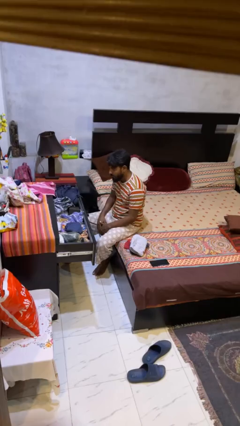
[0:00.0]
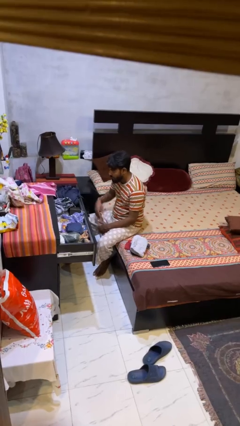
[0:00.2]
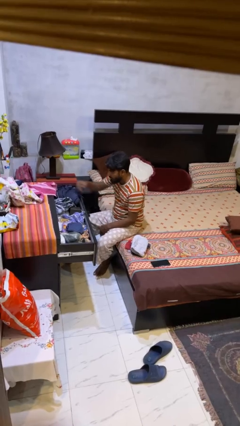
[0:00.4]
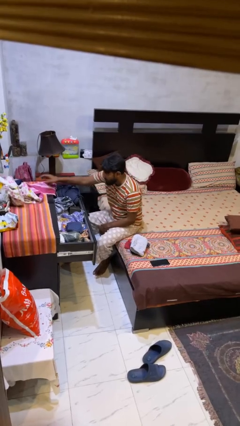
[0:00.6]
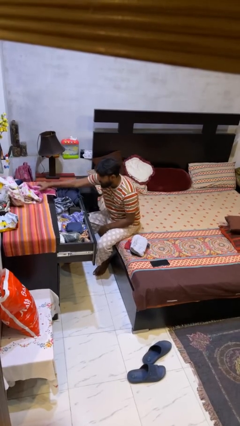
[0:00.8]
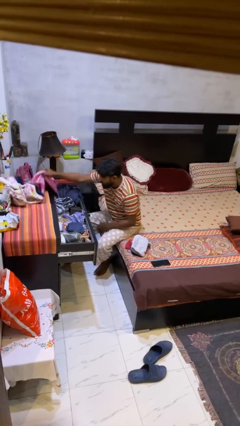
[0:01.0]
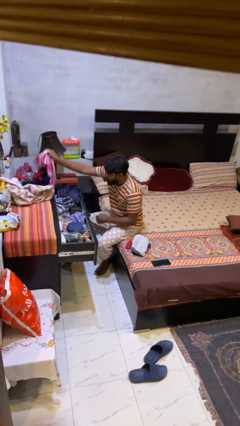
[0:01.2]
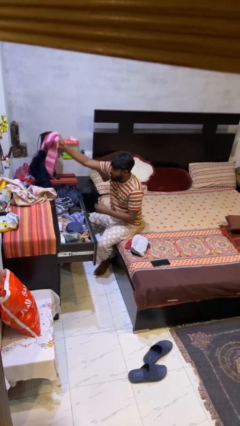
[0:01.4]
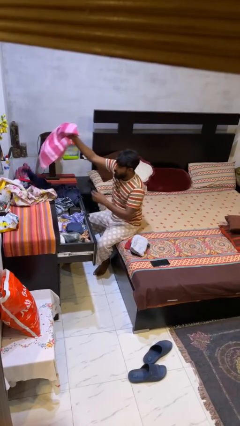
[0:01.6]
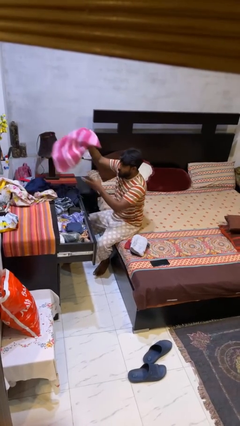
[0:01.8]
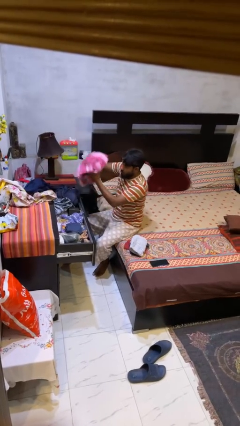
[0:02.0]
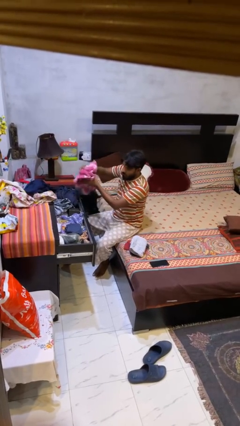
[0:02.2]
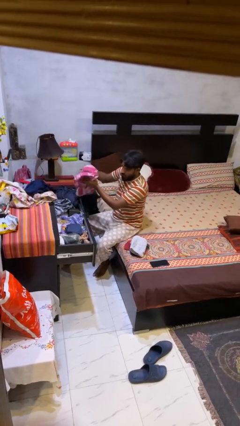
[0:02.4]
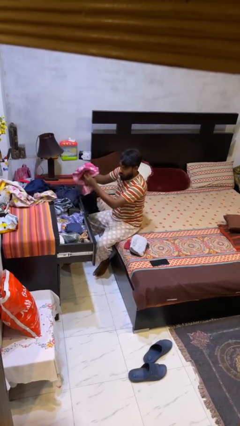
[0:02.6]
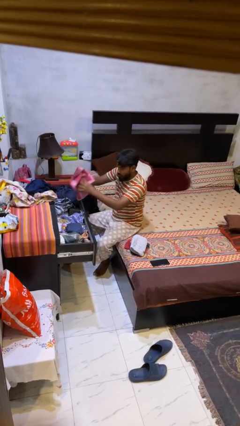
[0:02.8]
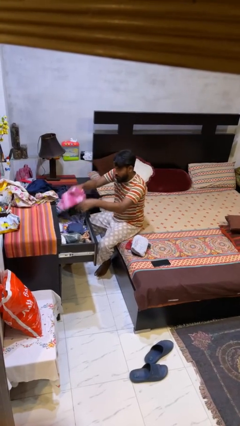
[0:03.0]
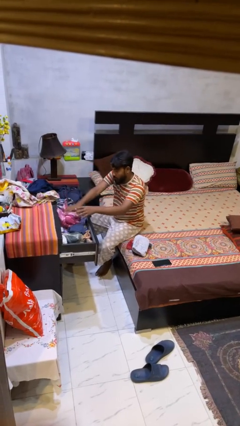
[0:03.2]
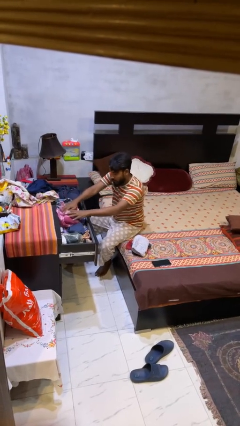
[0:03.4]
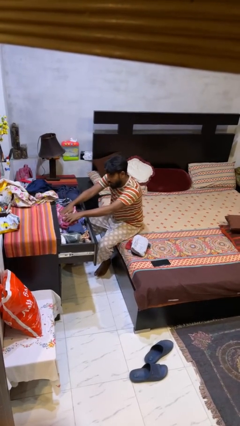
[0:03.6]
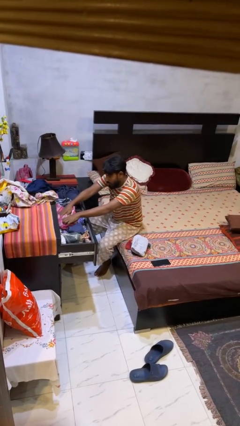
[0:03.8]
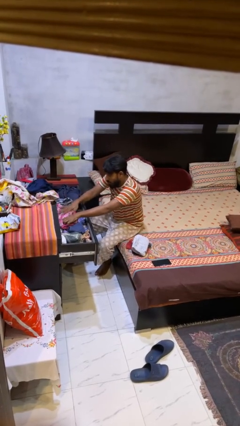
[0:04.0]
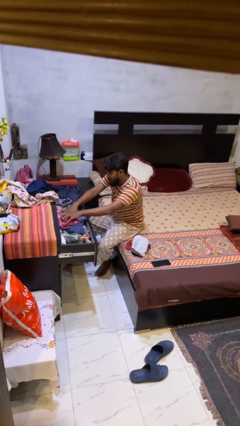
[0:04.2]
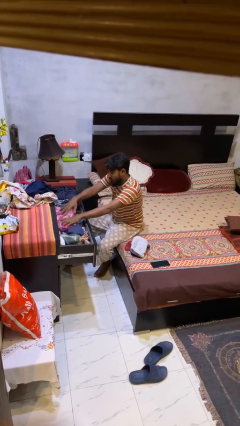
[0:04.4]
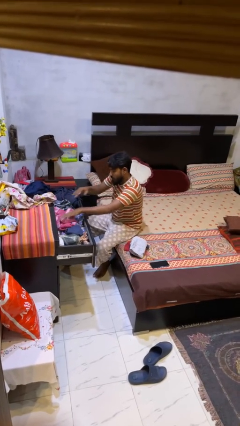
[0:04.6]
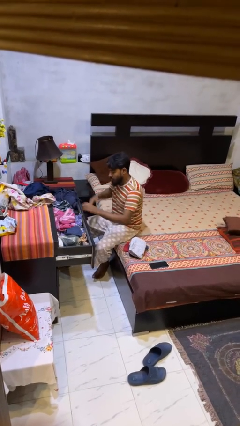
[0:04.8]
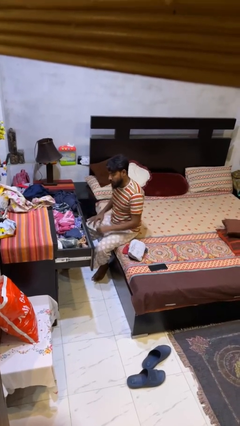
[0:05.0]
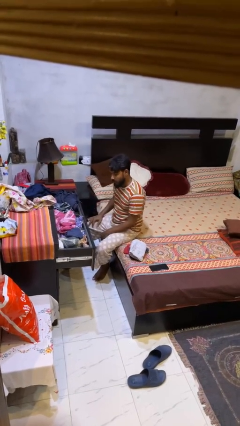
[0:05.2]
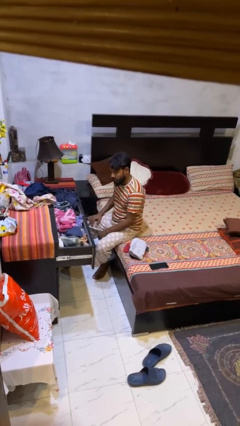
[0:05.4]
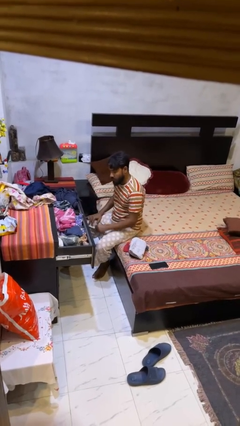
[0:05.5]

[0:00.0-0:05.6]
person puts clothes into dresser

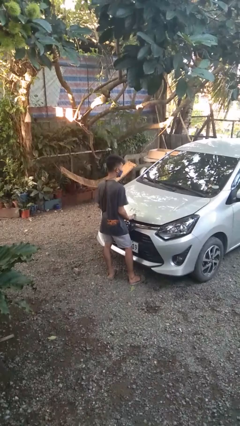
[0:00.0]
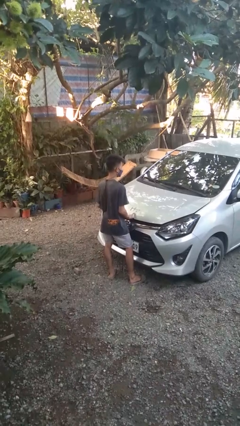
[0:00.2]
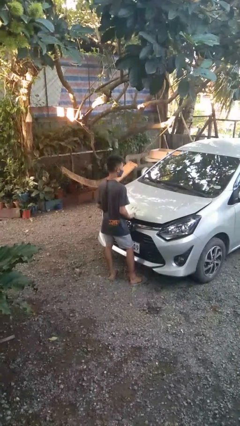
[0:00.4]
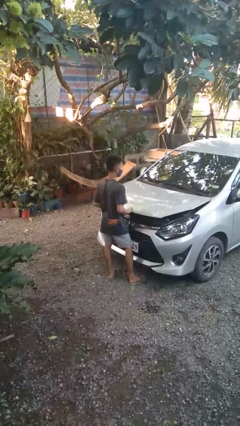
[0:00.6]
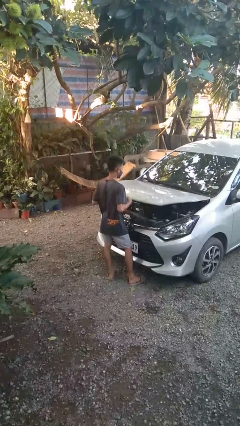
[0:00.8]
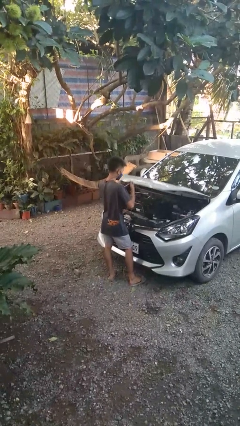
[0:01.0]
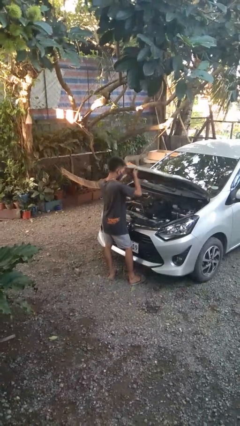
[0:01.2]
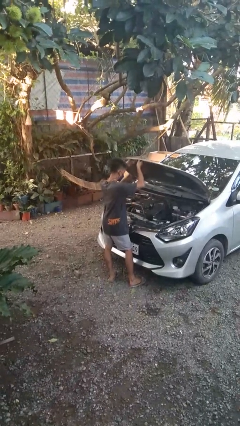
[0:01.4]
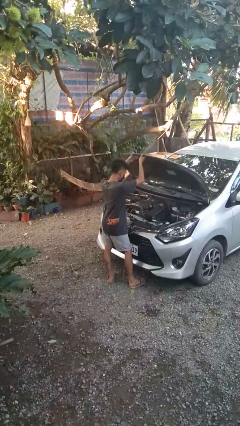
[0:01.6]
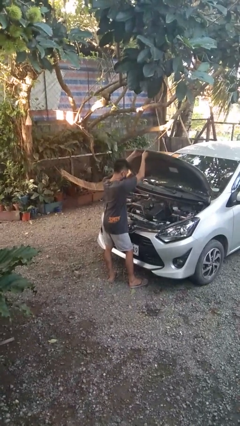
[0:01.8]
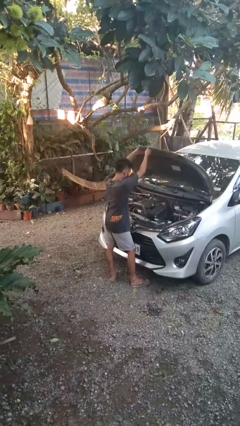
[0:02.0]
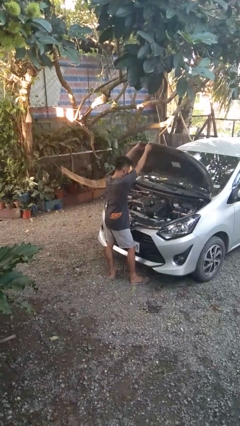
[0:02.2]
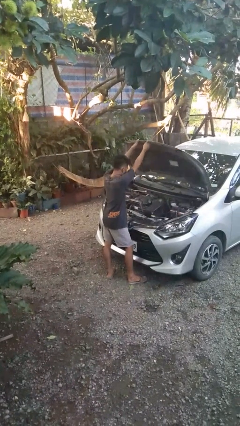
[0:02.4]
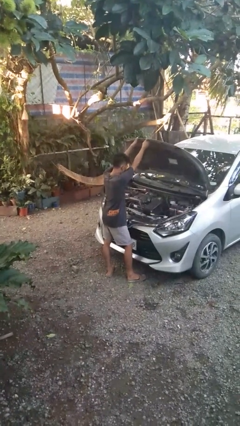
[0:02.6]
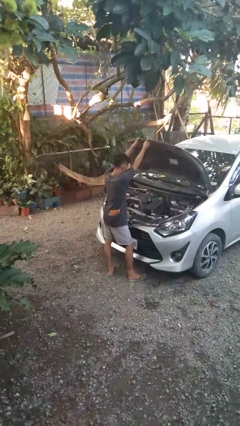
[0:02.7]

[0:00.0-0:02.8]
person opens car hood

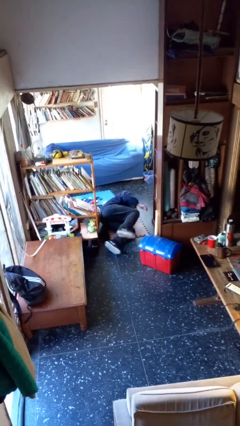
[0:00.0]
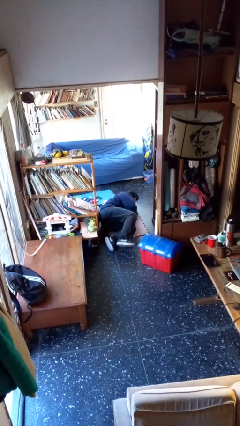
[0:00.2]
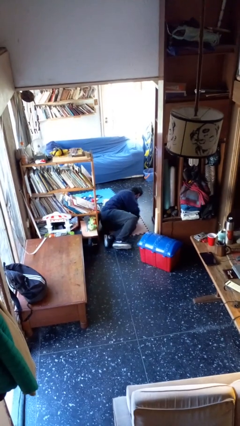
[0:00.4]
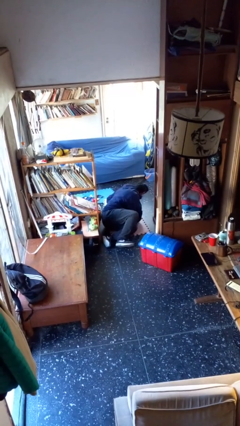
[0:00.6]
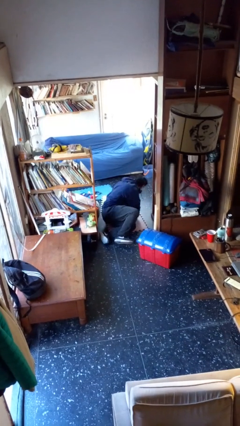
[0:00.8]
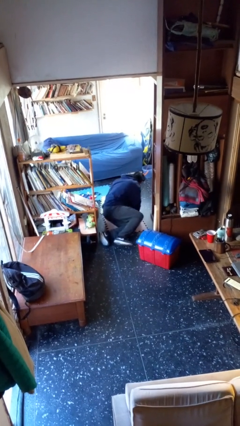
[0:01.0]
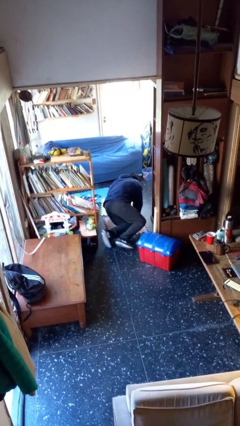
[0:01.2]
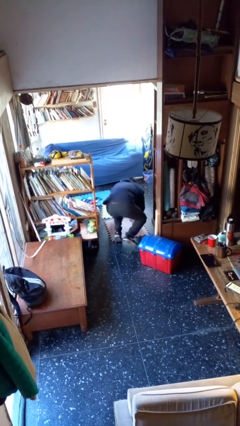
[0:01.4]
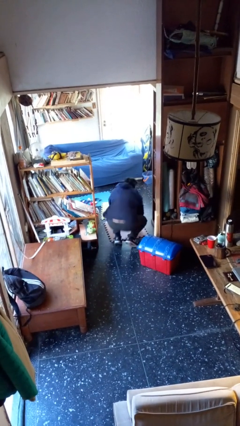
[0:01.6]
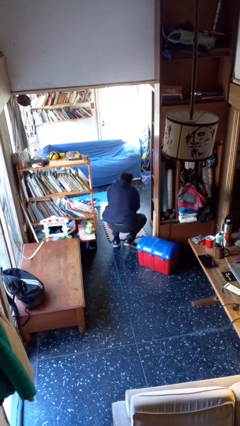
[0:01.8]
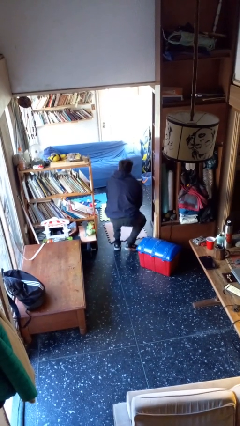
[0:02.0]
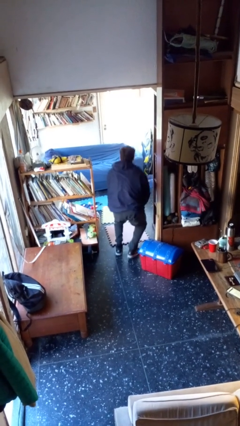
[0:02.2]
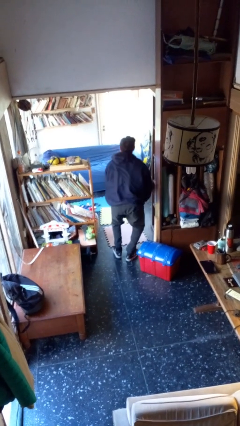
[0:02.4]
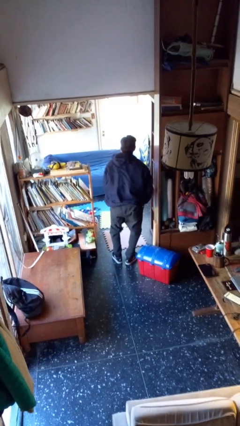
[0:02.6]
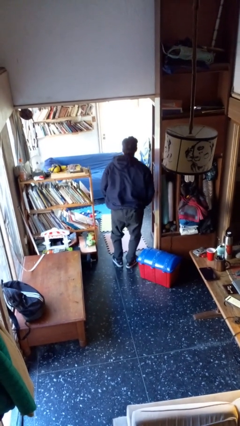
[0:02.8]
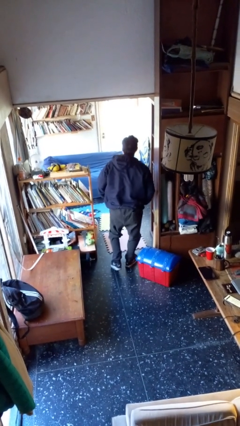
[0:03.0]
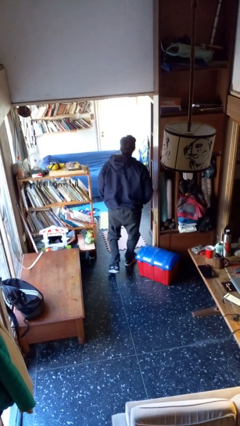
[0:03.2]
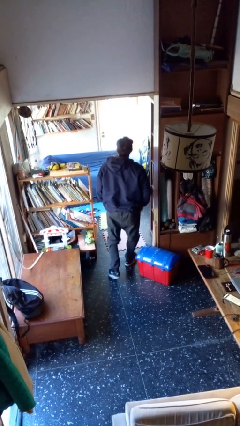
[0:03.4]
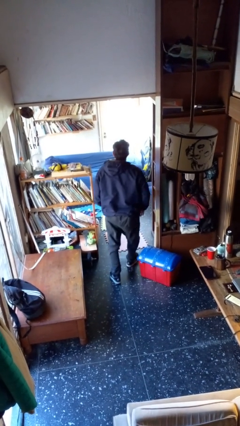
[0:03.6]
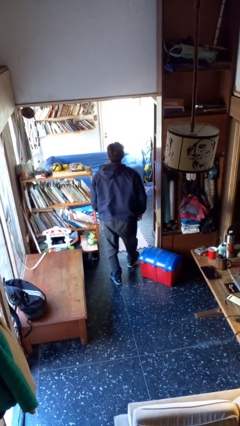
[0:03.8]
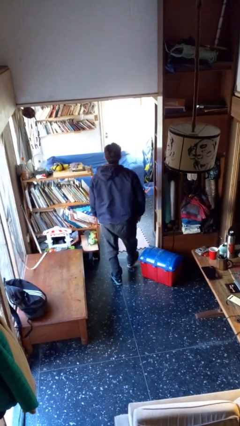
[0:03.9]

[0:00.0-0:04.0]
person stands up from floor

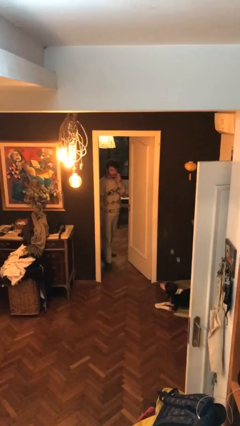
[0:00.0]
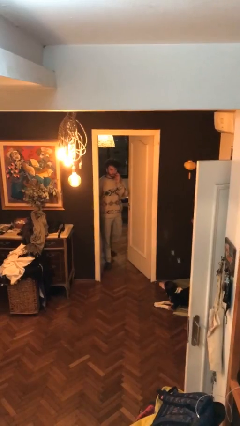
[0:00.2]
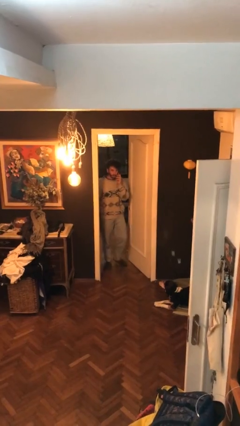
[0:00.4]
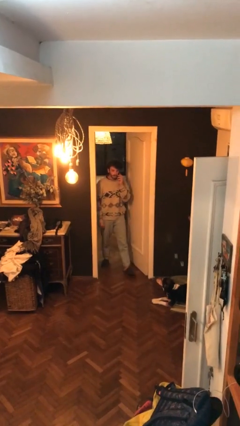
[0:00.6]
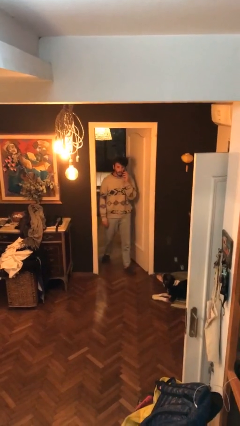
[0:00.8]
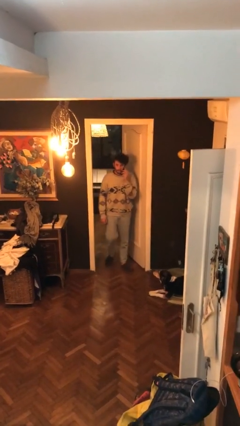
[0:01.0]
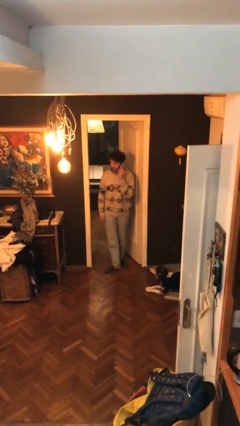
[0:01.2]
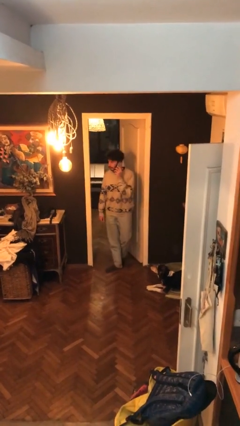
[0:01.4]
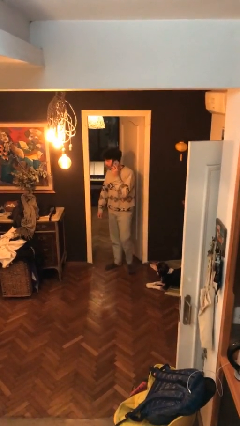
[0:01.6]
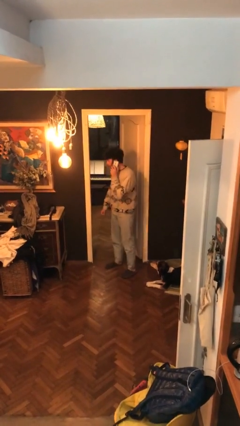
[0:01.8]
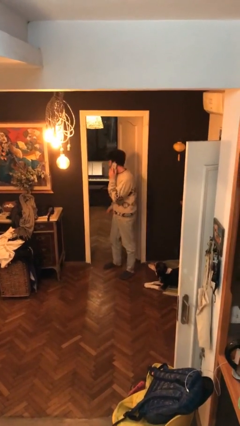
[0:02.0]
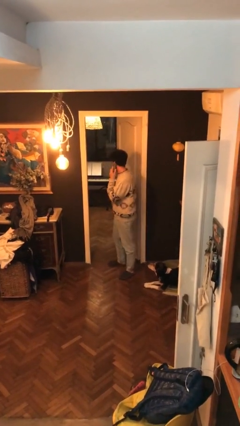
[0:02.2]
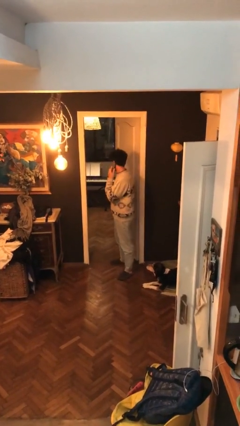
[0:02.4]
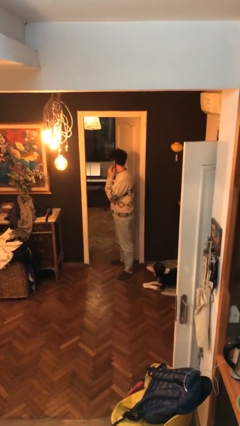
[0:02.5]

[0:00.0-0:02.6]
person enters scene through structure

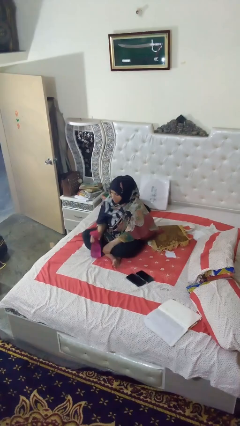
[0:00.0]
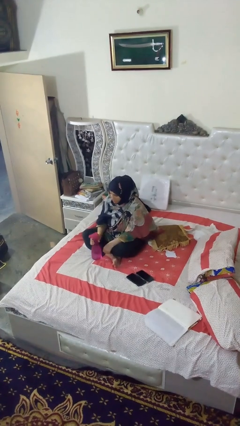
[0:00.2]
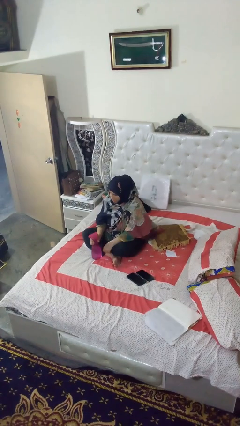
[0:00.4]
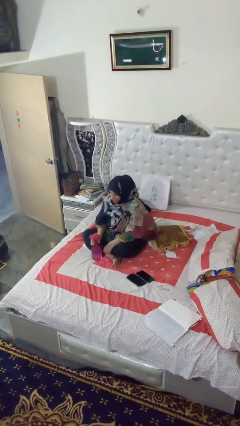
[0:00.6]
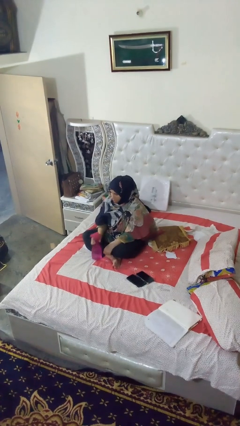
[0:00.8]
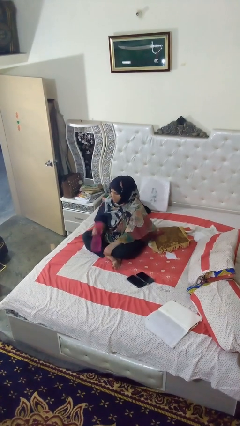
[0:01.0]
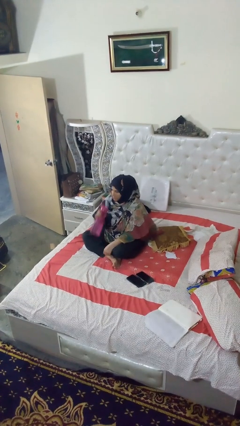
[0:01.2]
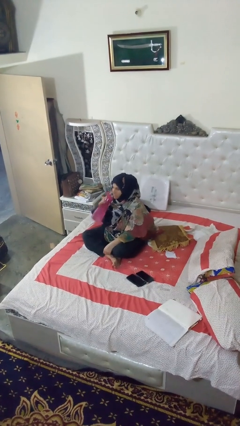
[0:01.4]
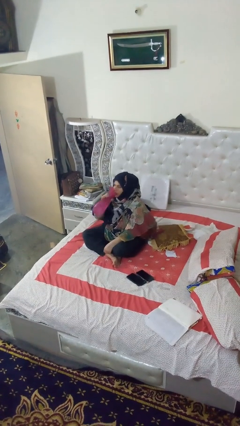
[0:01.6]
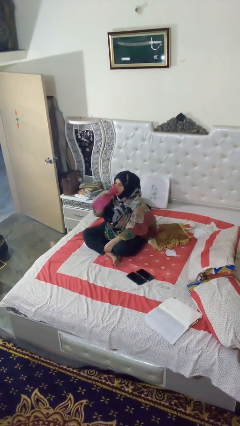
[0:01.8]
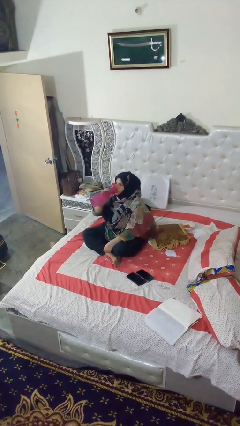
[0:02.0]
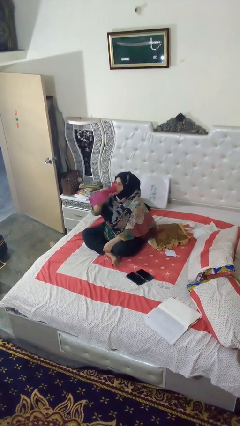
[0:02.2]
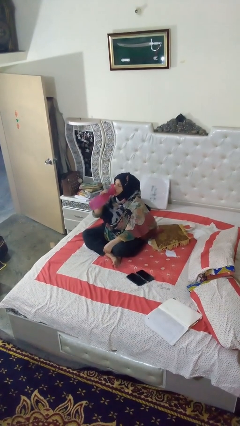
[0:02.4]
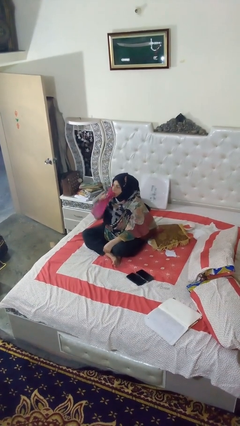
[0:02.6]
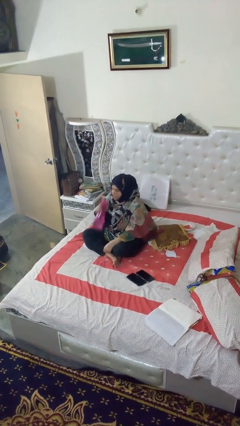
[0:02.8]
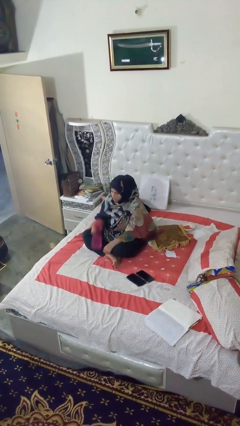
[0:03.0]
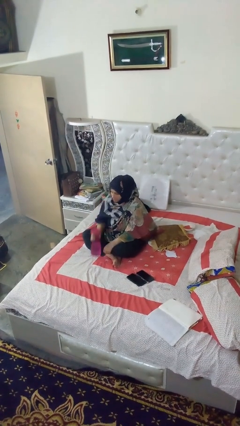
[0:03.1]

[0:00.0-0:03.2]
person drinks from bottle
